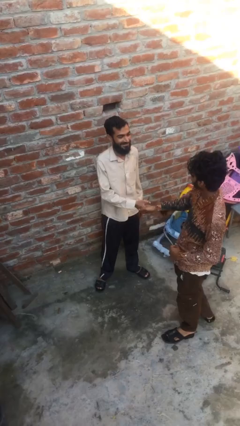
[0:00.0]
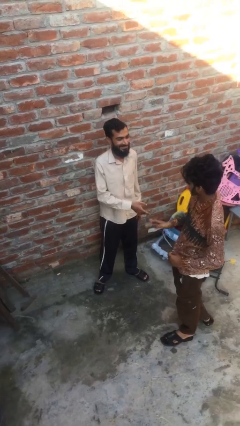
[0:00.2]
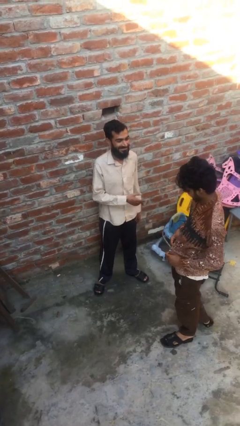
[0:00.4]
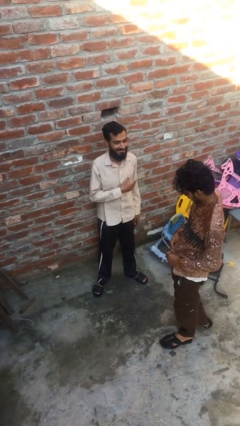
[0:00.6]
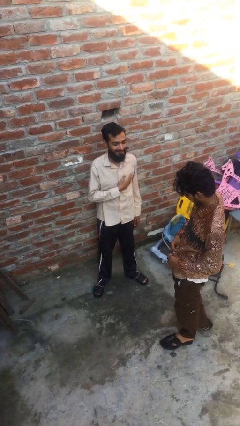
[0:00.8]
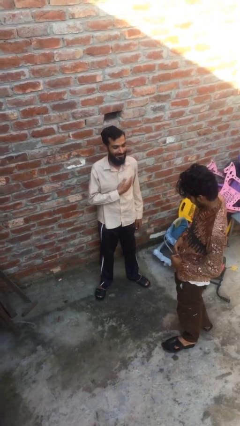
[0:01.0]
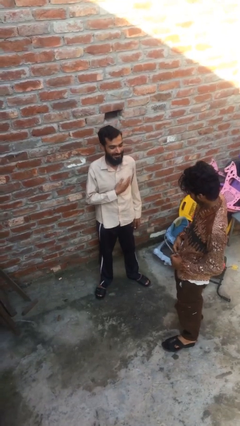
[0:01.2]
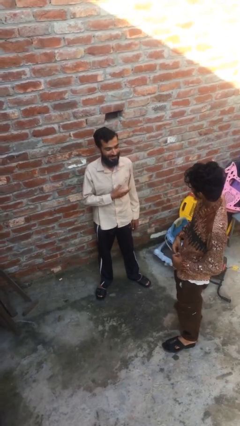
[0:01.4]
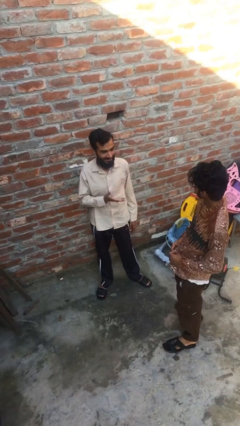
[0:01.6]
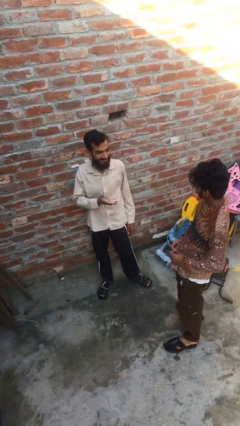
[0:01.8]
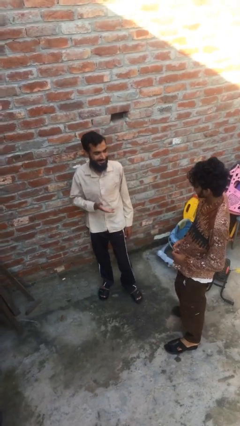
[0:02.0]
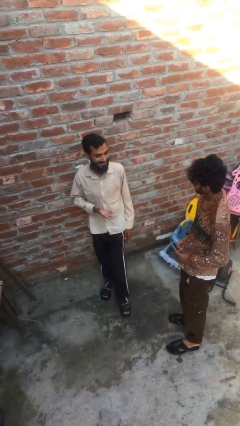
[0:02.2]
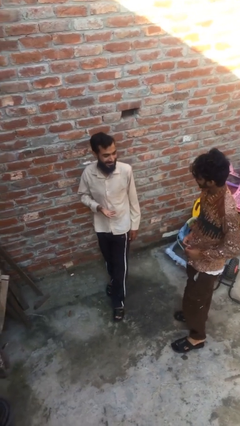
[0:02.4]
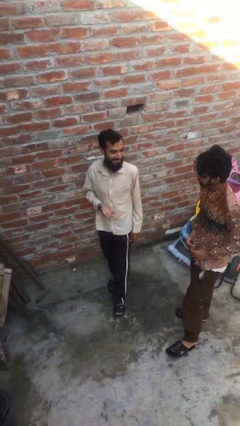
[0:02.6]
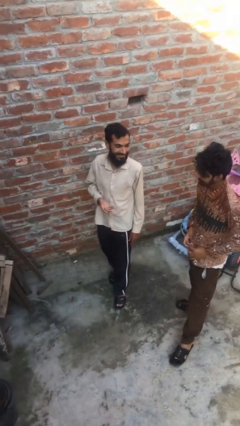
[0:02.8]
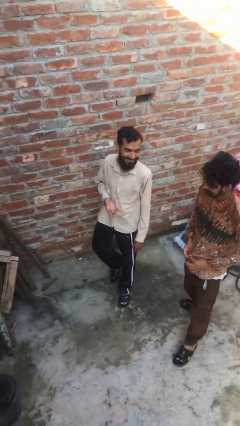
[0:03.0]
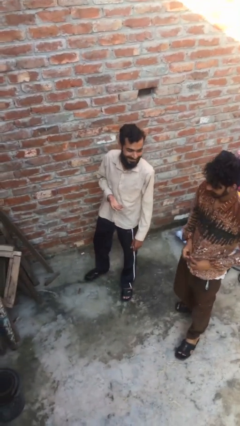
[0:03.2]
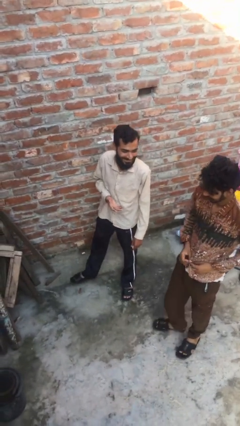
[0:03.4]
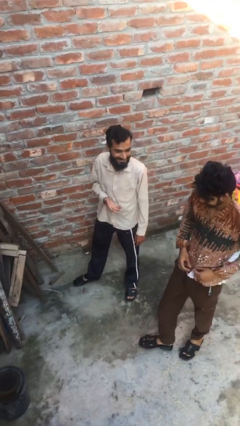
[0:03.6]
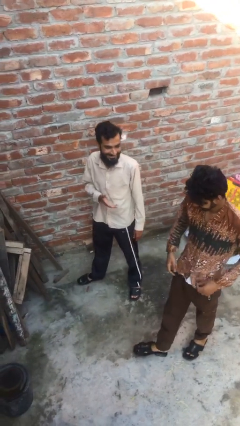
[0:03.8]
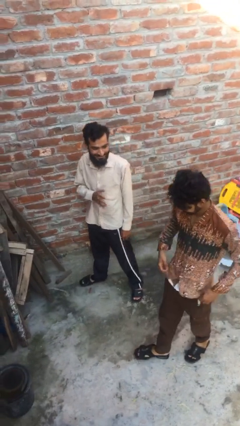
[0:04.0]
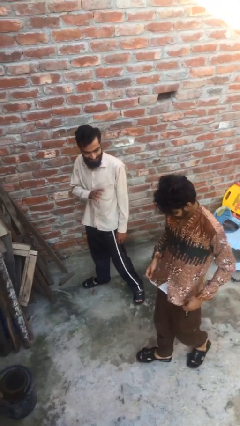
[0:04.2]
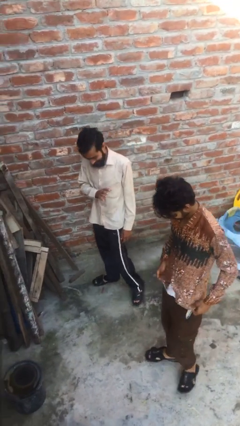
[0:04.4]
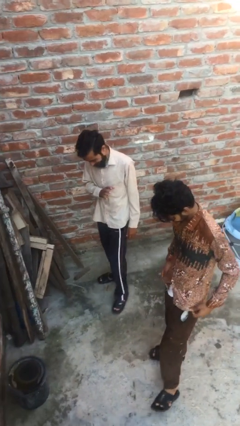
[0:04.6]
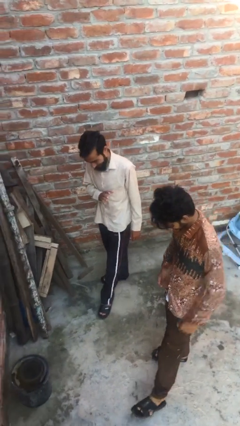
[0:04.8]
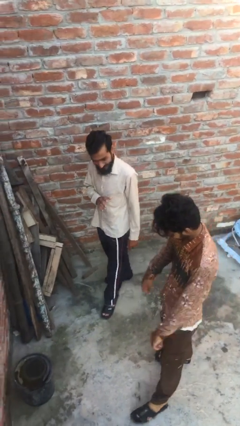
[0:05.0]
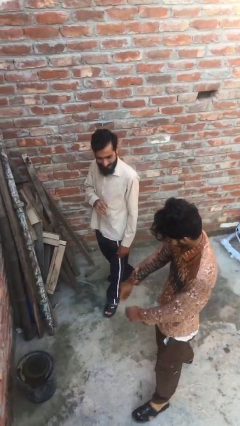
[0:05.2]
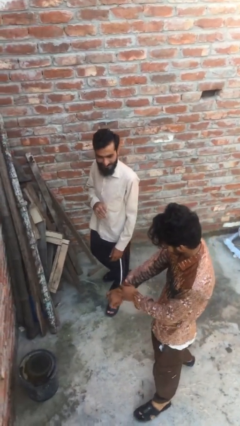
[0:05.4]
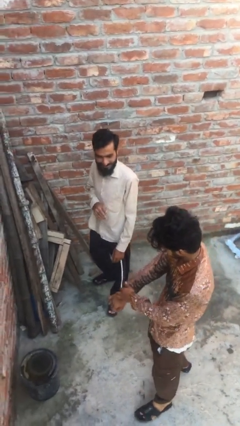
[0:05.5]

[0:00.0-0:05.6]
person talks to person

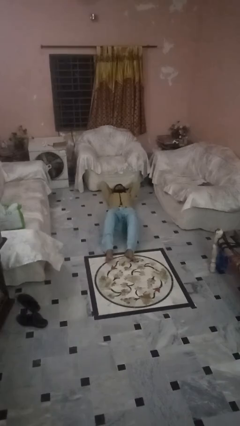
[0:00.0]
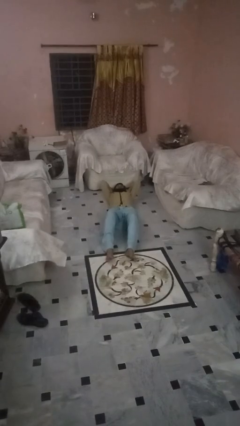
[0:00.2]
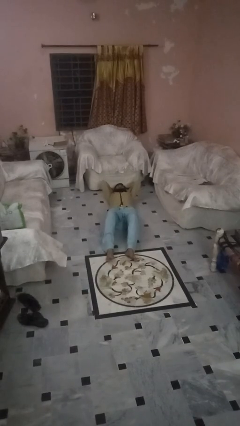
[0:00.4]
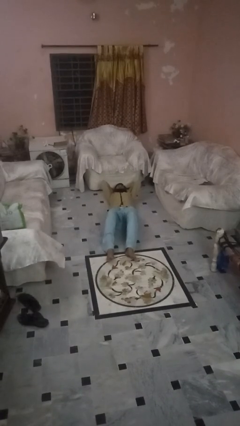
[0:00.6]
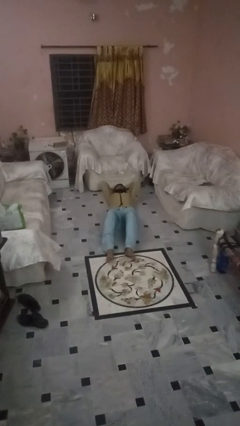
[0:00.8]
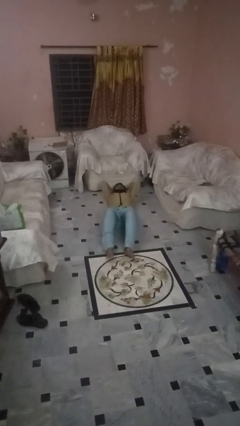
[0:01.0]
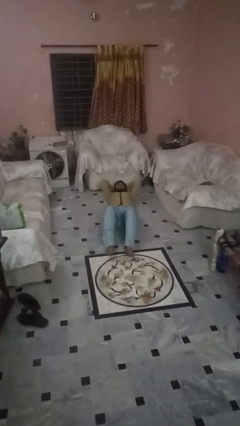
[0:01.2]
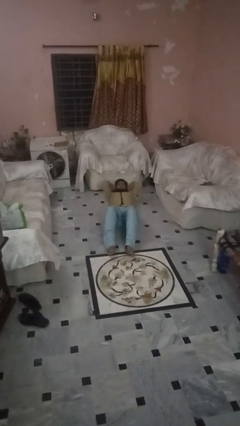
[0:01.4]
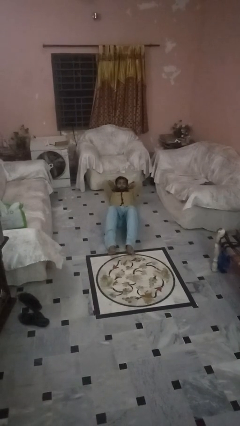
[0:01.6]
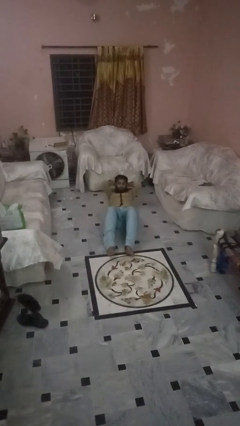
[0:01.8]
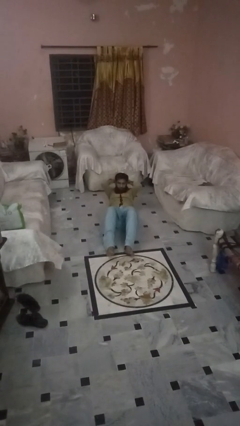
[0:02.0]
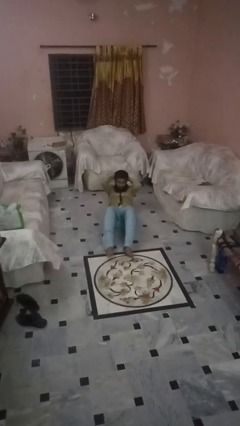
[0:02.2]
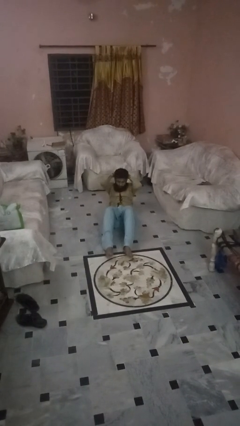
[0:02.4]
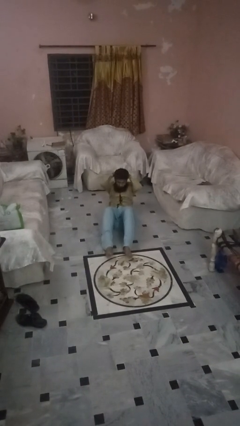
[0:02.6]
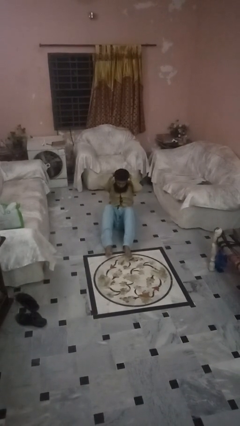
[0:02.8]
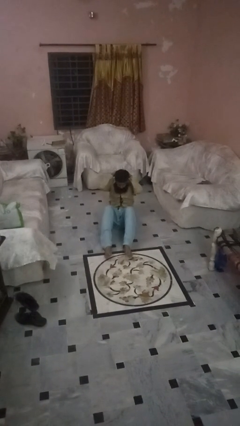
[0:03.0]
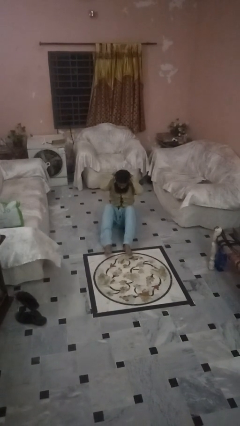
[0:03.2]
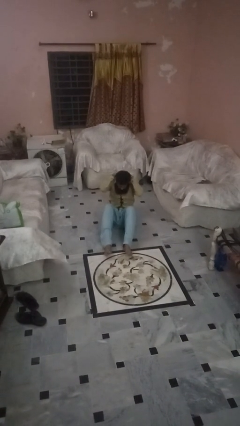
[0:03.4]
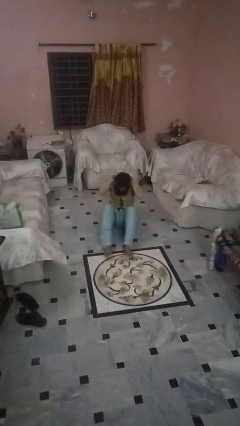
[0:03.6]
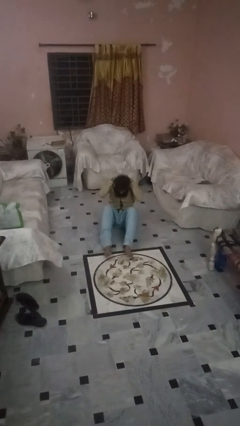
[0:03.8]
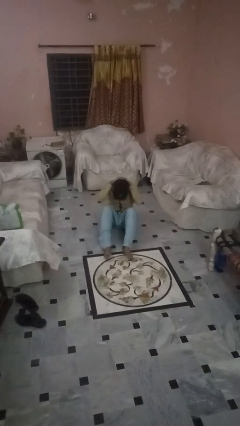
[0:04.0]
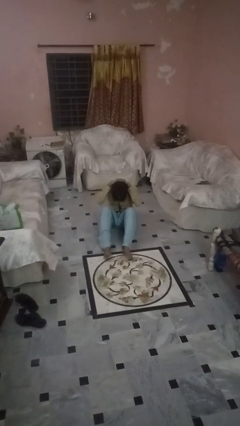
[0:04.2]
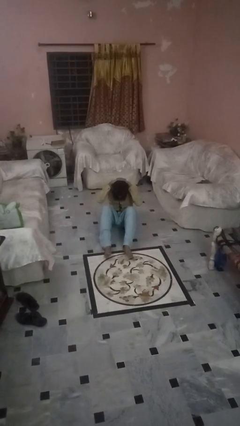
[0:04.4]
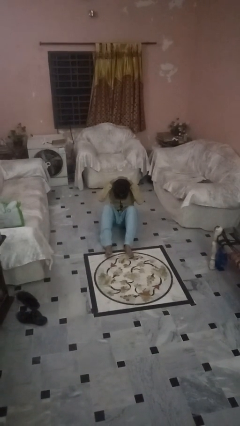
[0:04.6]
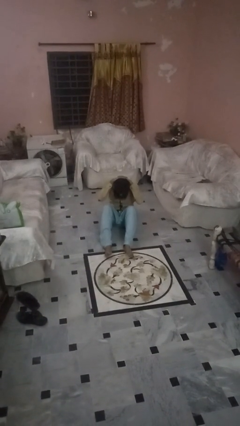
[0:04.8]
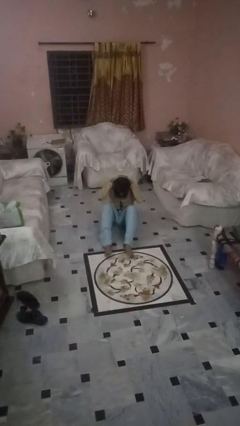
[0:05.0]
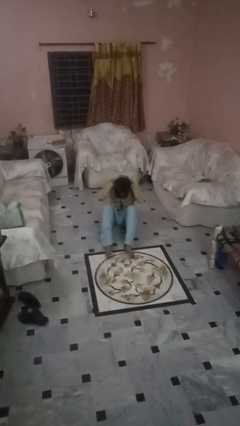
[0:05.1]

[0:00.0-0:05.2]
person exercises with situp

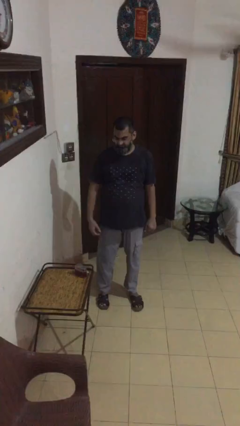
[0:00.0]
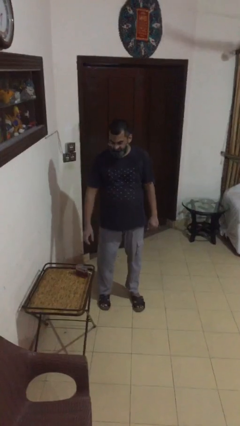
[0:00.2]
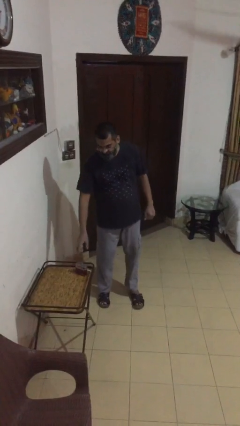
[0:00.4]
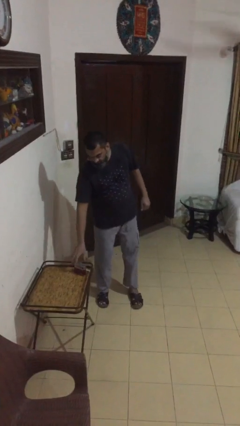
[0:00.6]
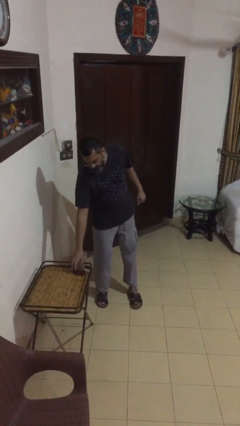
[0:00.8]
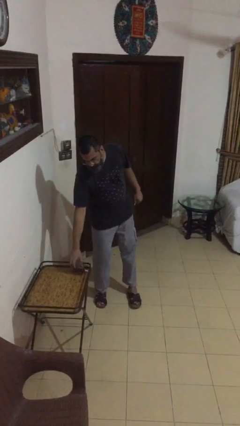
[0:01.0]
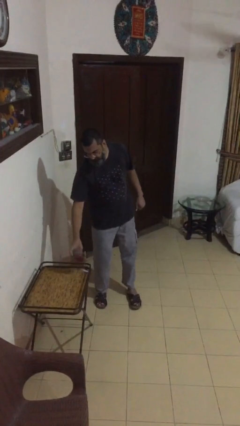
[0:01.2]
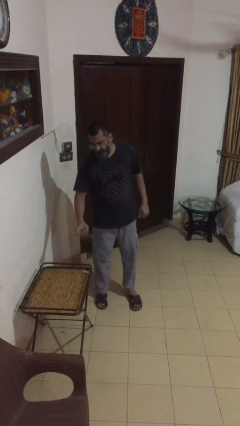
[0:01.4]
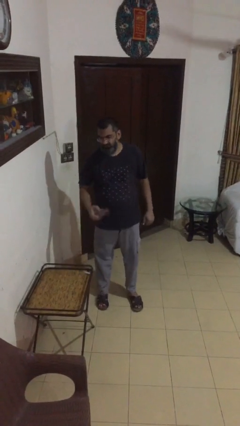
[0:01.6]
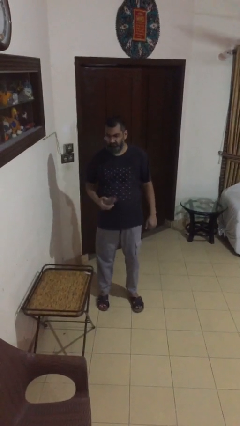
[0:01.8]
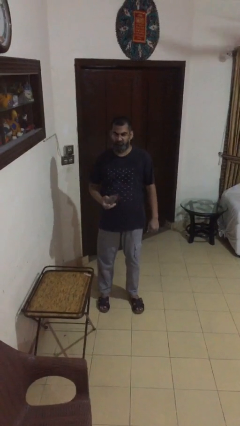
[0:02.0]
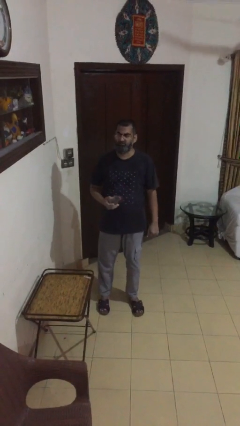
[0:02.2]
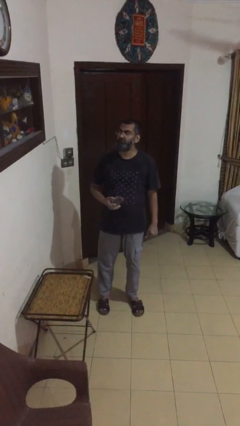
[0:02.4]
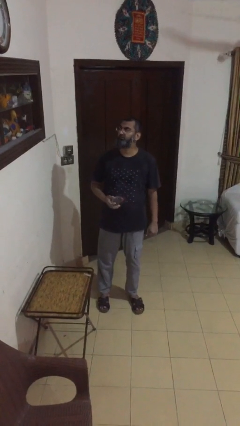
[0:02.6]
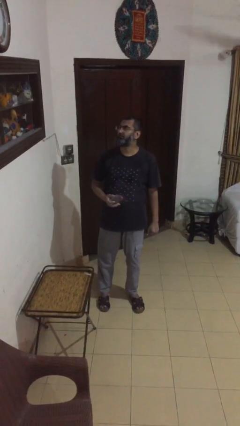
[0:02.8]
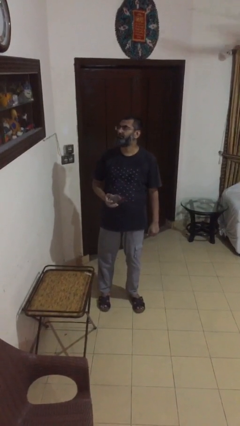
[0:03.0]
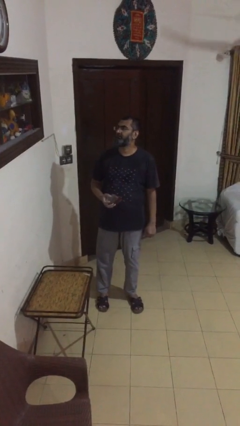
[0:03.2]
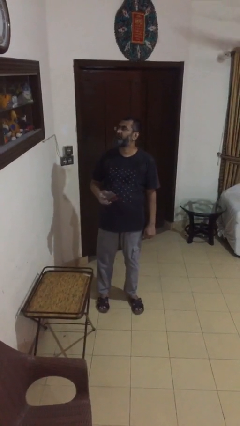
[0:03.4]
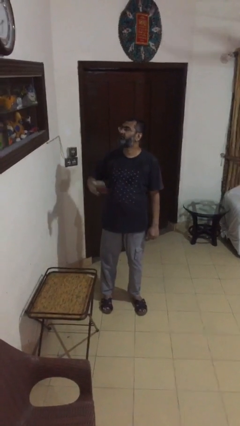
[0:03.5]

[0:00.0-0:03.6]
person picks up object from table

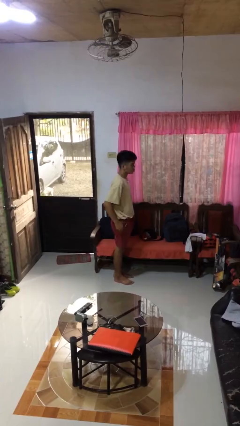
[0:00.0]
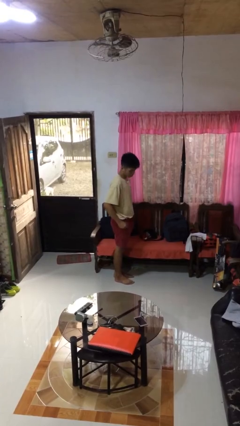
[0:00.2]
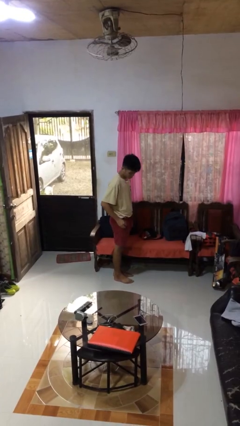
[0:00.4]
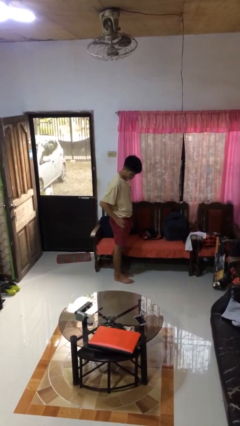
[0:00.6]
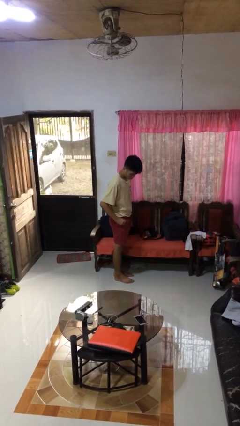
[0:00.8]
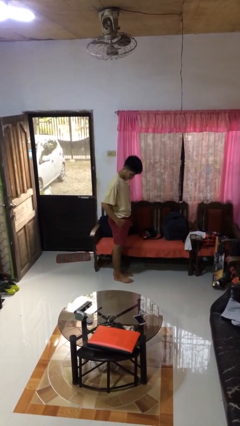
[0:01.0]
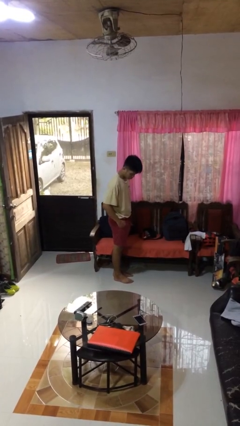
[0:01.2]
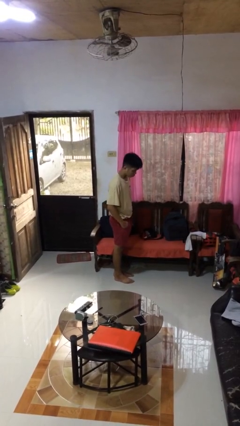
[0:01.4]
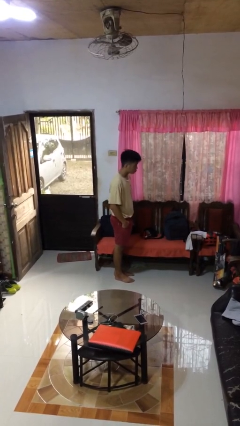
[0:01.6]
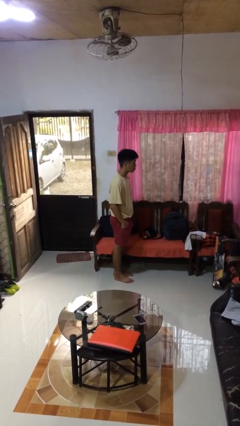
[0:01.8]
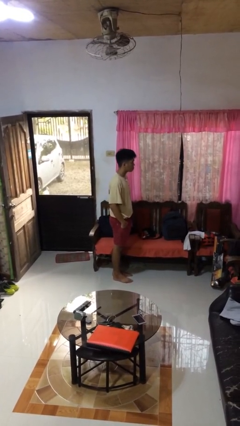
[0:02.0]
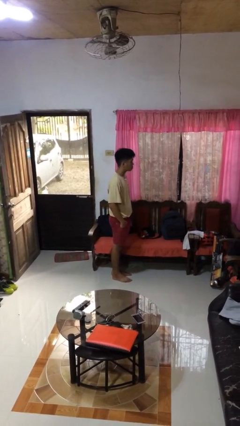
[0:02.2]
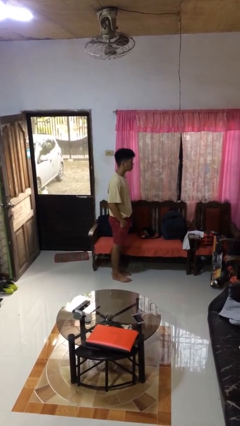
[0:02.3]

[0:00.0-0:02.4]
person puts hands in back pockets

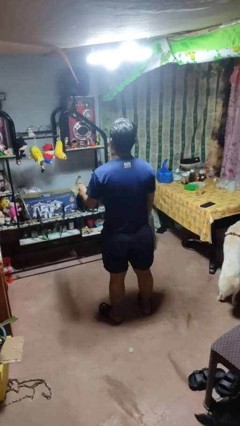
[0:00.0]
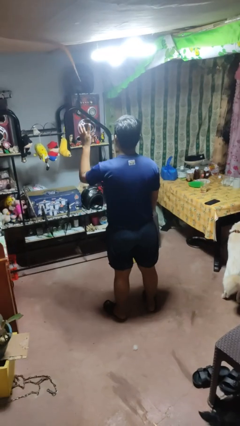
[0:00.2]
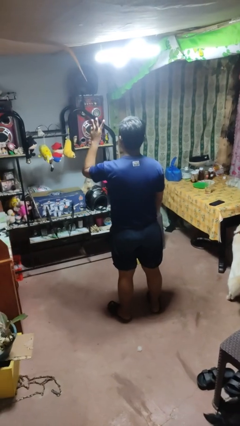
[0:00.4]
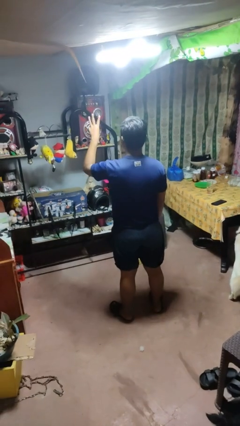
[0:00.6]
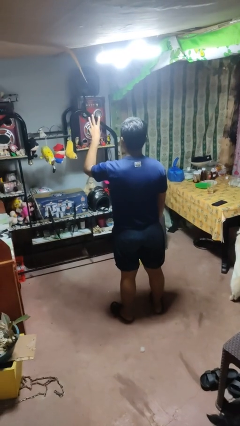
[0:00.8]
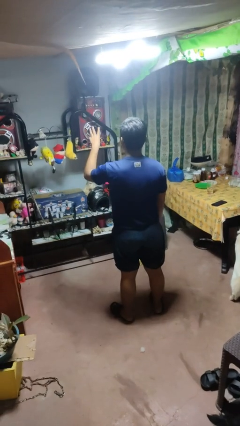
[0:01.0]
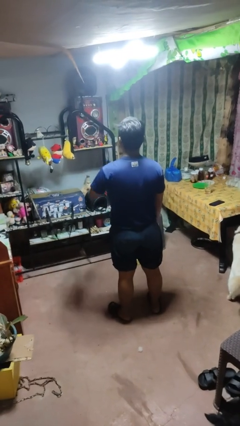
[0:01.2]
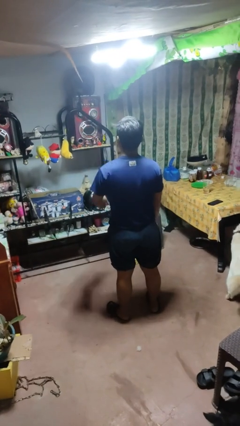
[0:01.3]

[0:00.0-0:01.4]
person gestures number three
